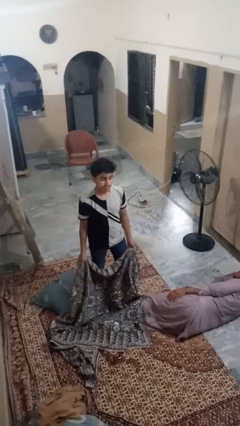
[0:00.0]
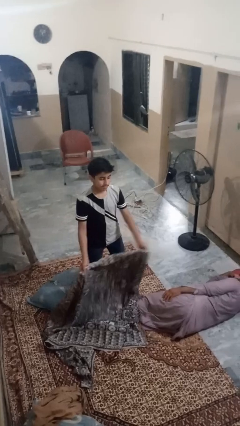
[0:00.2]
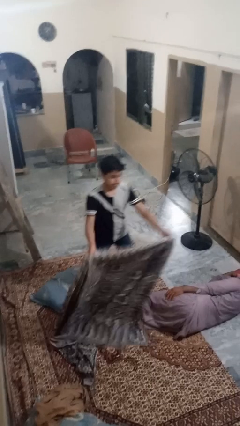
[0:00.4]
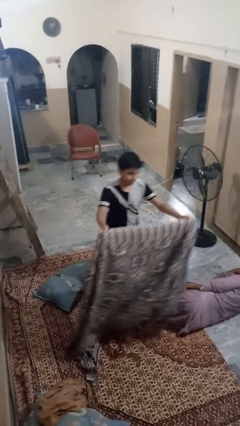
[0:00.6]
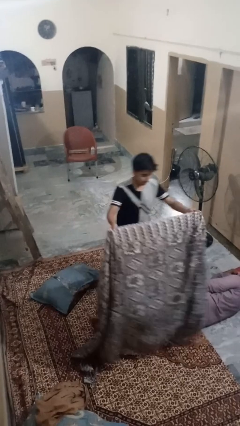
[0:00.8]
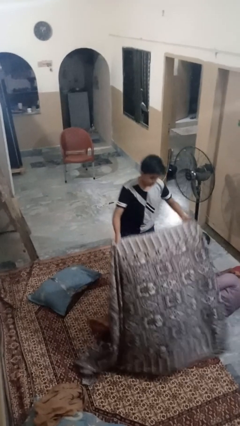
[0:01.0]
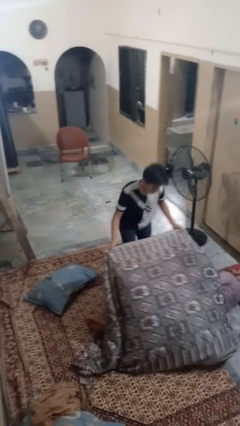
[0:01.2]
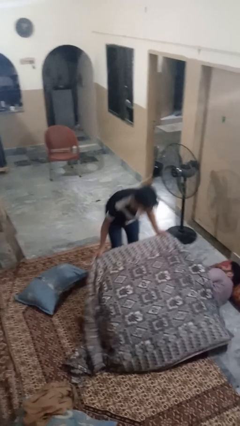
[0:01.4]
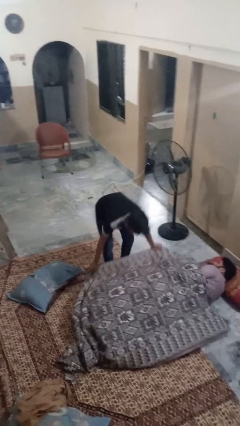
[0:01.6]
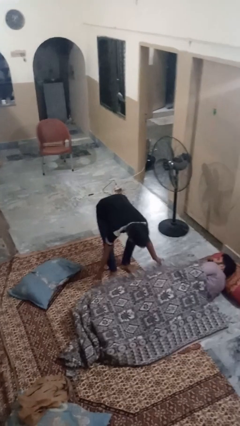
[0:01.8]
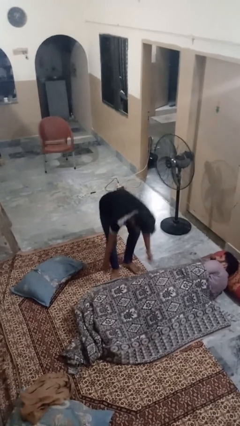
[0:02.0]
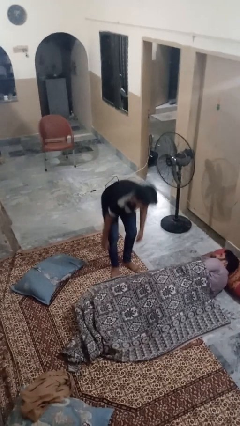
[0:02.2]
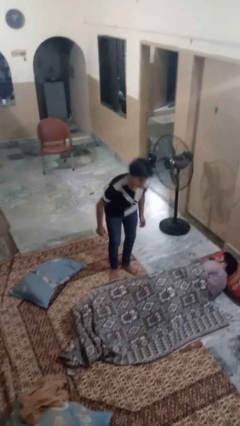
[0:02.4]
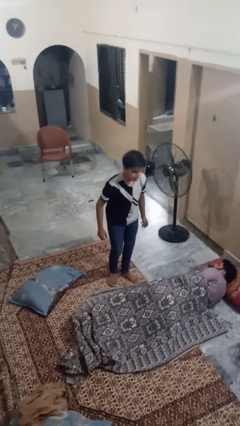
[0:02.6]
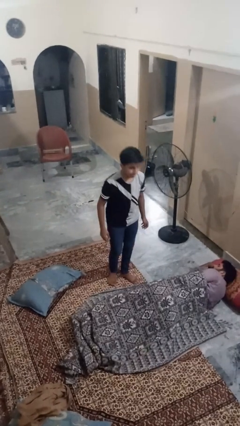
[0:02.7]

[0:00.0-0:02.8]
person covers friend with blanket

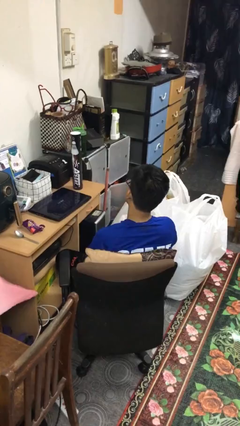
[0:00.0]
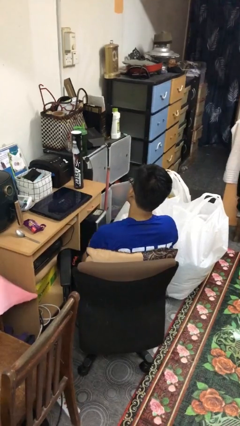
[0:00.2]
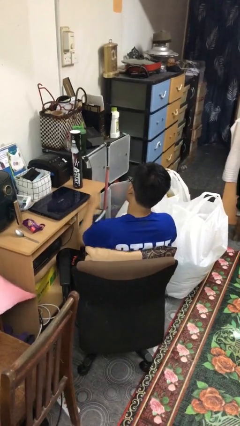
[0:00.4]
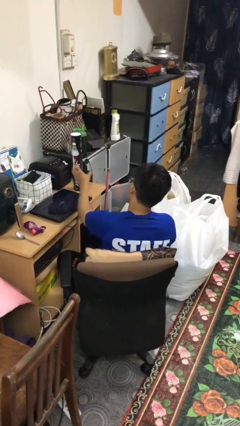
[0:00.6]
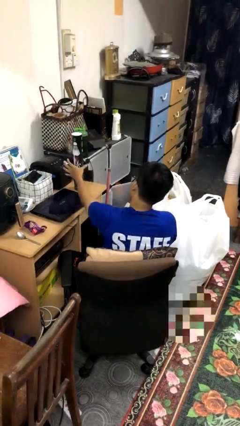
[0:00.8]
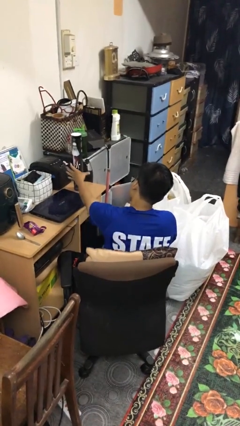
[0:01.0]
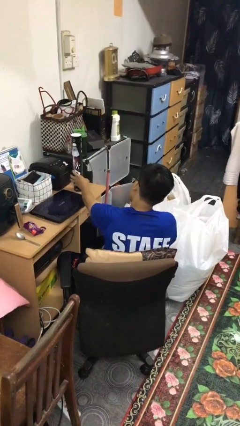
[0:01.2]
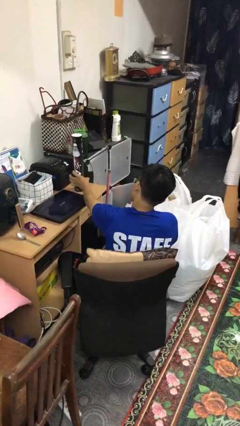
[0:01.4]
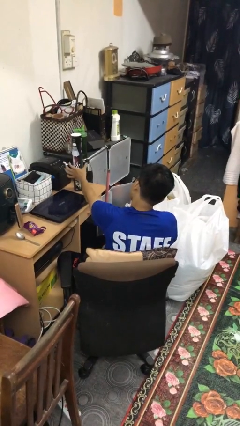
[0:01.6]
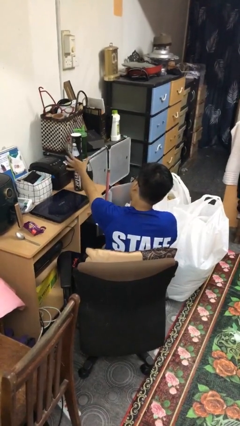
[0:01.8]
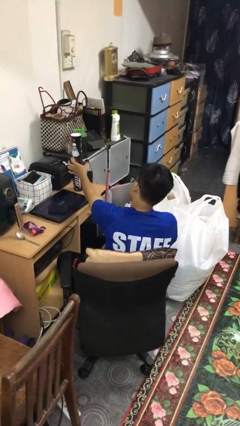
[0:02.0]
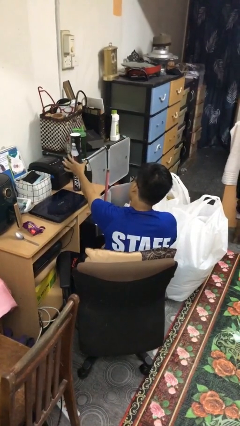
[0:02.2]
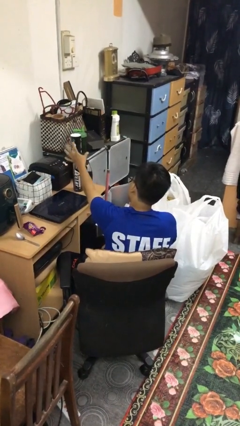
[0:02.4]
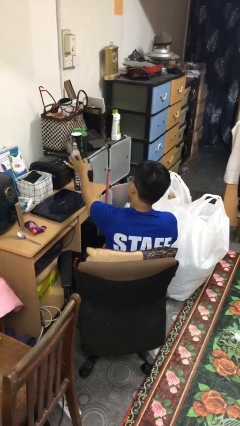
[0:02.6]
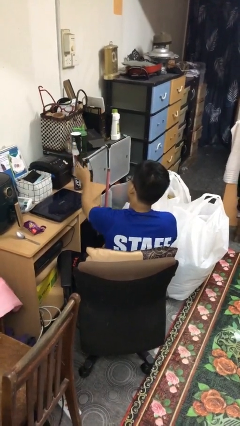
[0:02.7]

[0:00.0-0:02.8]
person waves hand over object

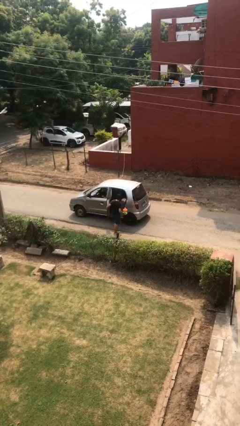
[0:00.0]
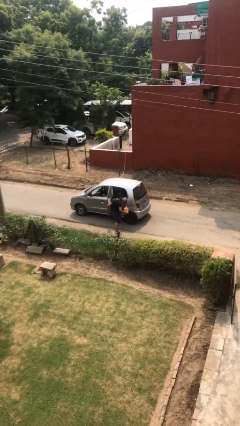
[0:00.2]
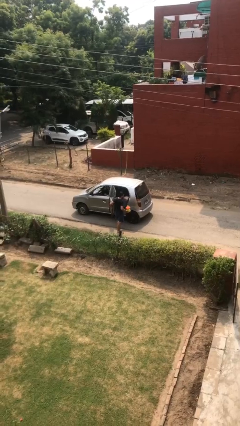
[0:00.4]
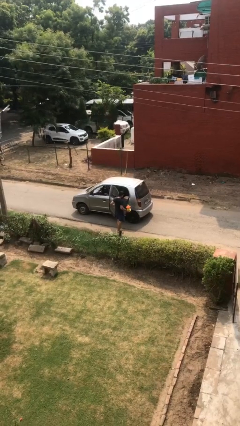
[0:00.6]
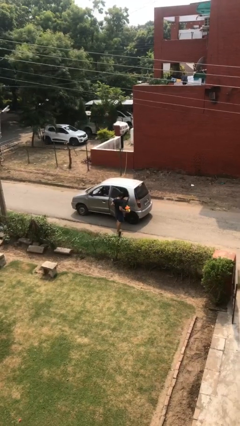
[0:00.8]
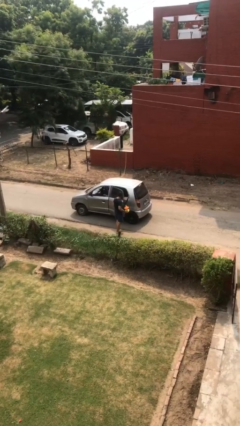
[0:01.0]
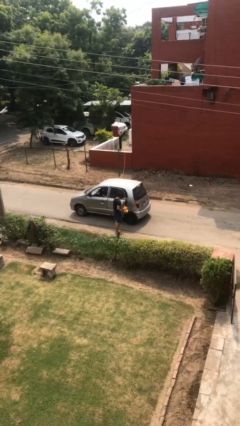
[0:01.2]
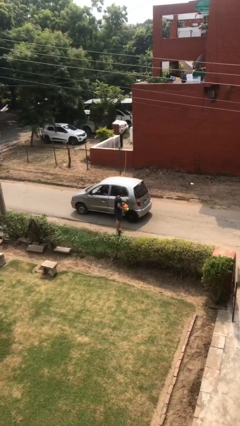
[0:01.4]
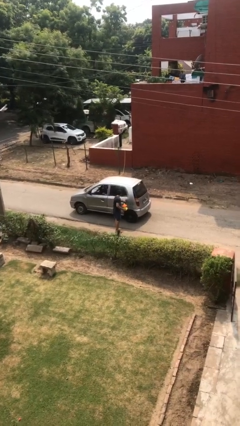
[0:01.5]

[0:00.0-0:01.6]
person closes car door

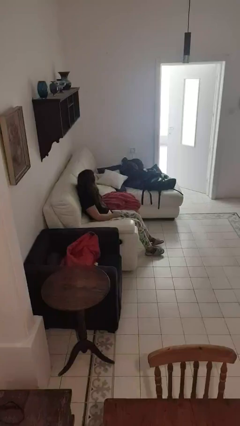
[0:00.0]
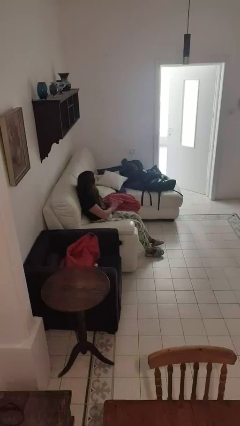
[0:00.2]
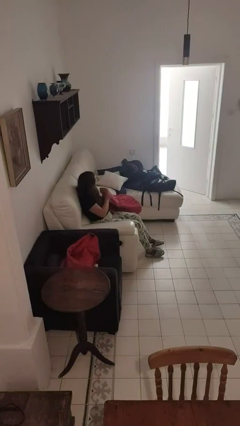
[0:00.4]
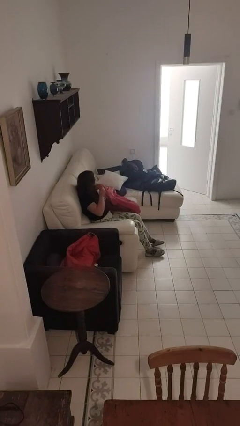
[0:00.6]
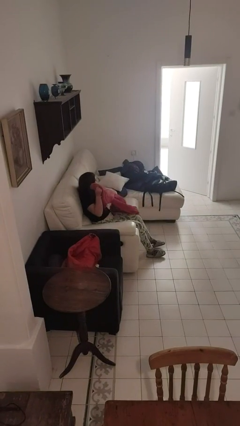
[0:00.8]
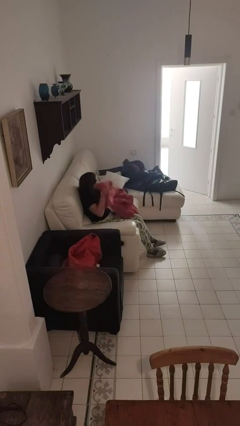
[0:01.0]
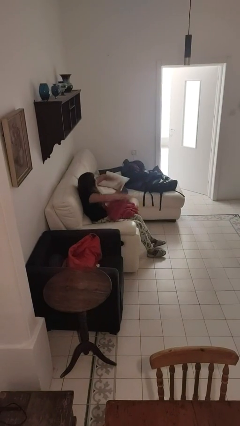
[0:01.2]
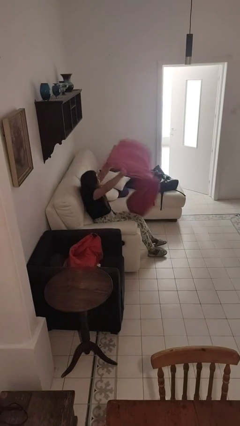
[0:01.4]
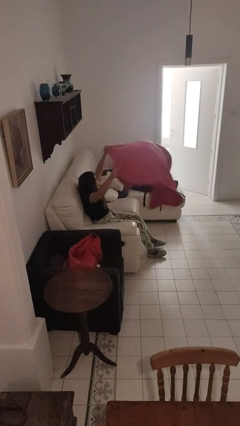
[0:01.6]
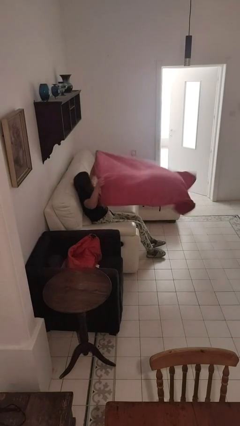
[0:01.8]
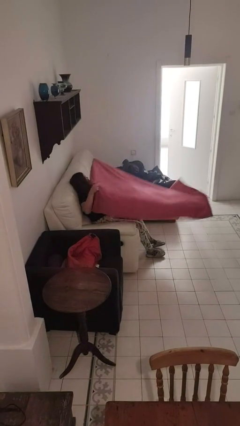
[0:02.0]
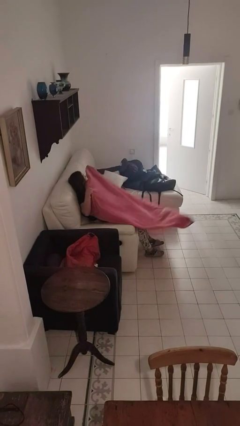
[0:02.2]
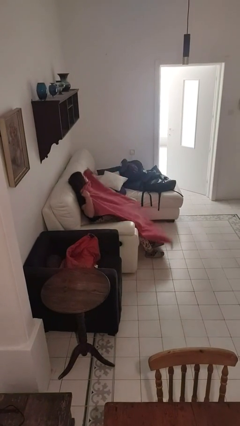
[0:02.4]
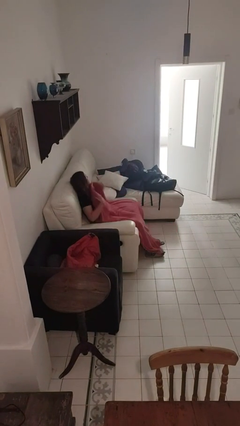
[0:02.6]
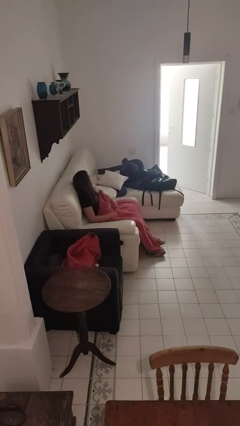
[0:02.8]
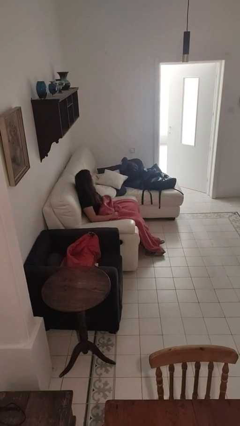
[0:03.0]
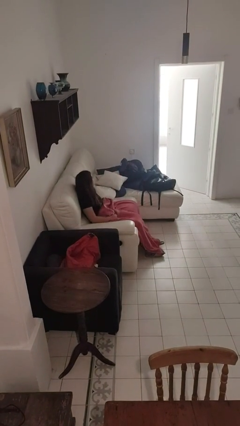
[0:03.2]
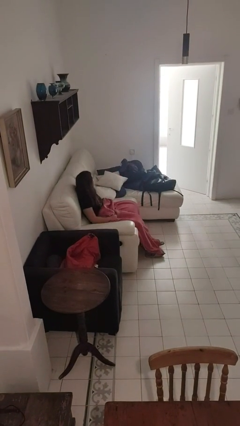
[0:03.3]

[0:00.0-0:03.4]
person covers with blanket

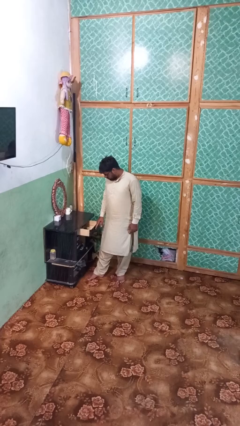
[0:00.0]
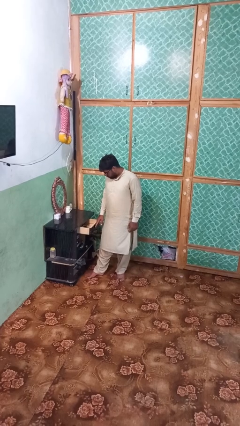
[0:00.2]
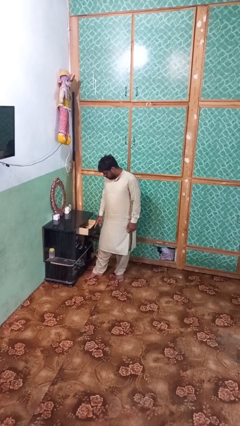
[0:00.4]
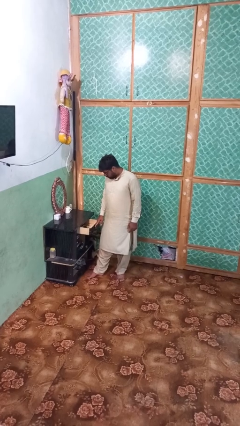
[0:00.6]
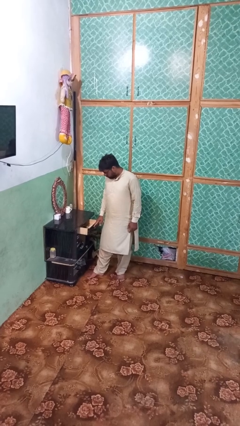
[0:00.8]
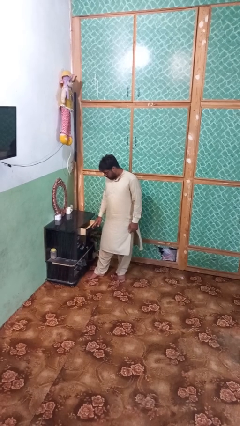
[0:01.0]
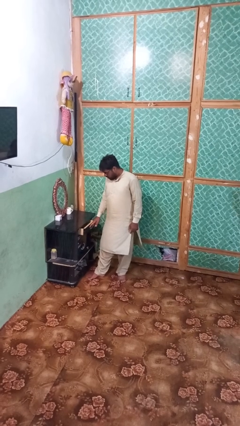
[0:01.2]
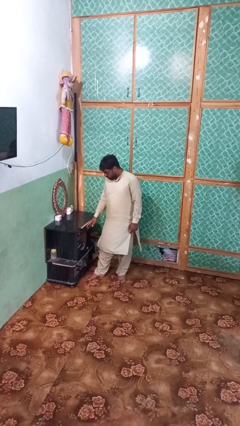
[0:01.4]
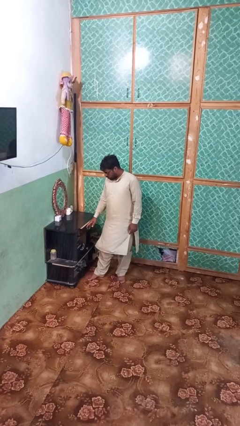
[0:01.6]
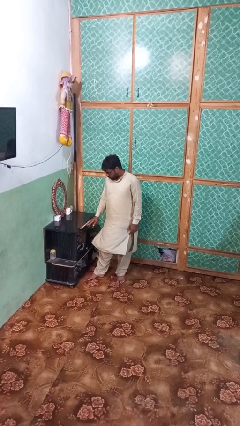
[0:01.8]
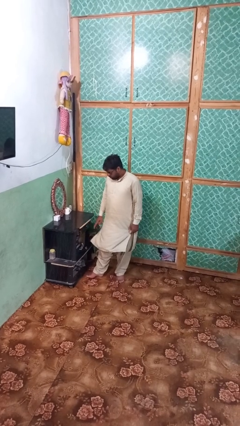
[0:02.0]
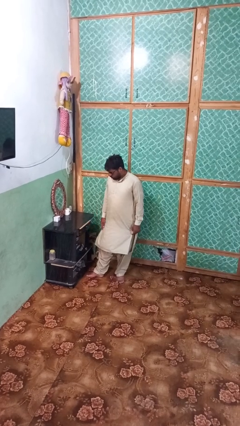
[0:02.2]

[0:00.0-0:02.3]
person closes dresser drawer

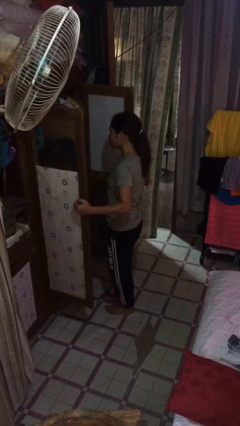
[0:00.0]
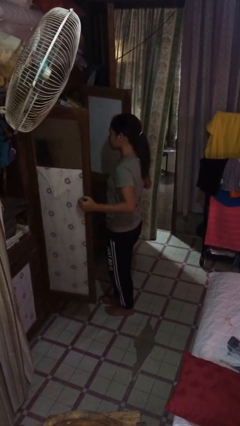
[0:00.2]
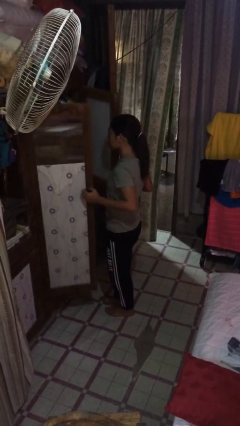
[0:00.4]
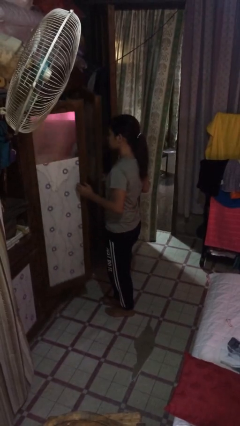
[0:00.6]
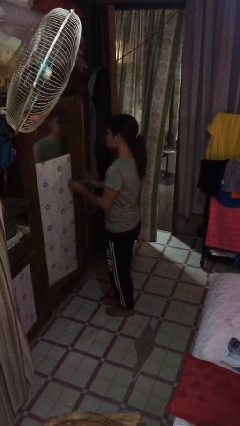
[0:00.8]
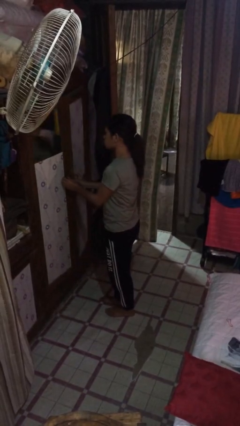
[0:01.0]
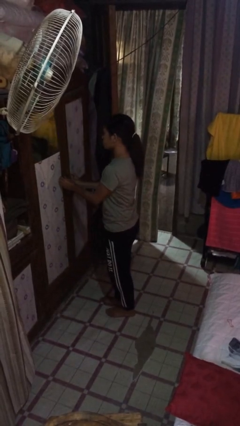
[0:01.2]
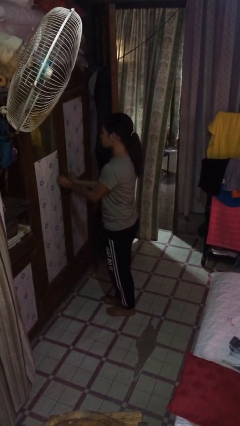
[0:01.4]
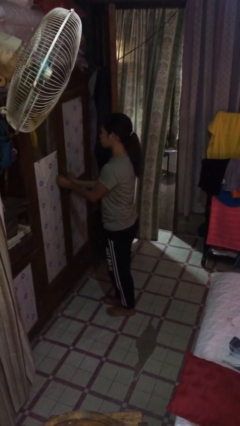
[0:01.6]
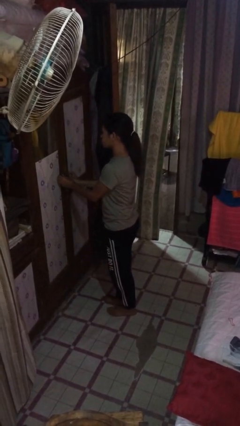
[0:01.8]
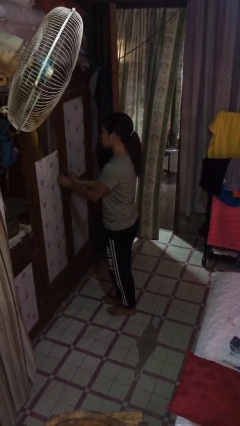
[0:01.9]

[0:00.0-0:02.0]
person closes closet door

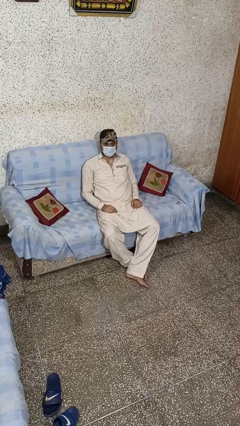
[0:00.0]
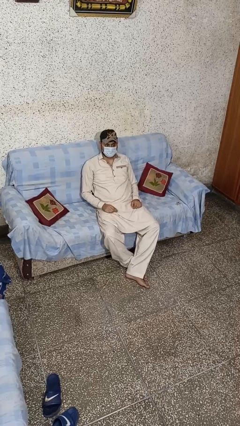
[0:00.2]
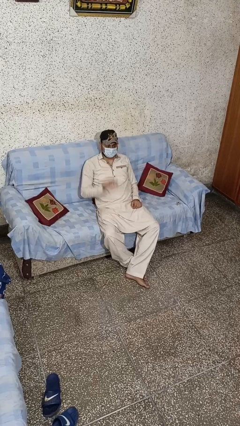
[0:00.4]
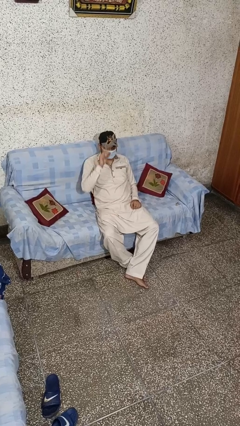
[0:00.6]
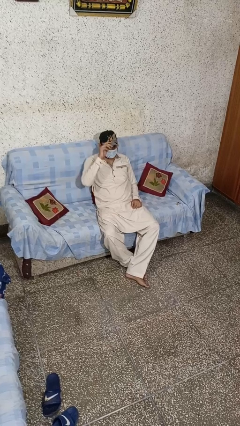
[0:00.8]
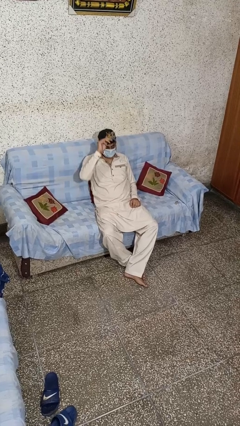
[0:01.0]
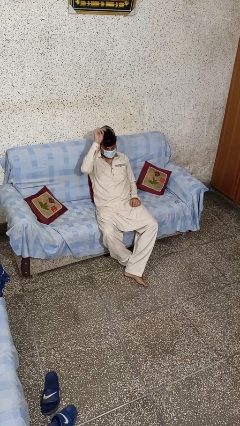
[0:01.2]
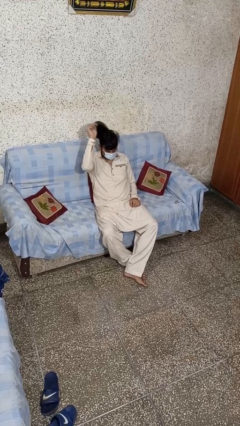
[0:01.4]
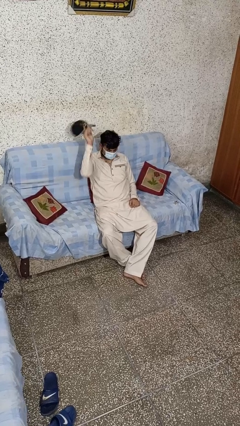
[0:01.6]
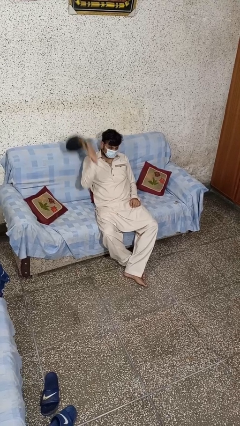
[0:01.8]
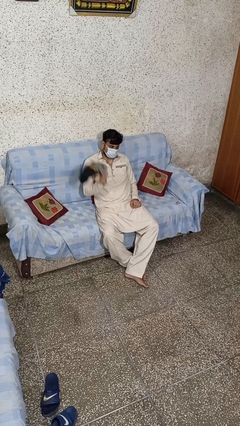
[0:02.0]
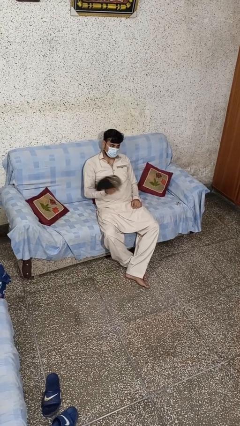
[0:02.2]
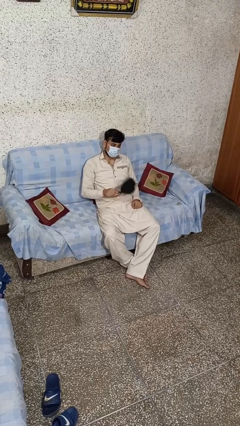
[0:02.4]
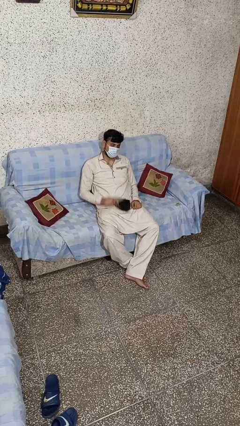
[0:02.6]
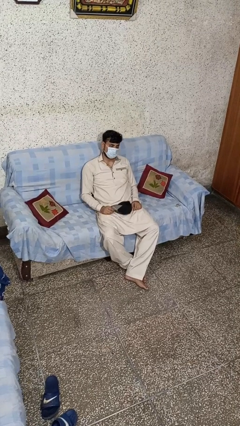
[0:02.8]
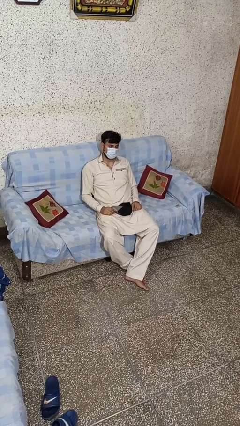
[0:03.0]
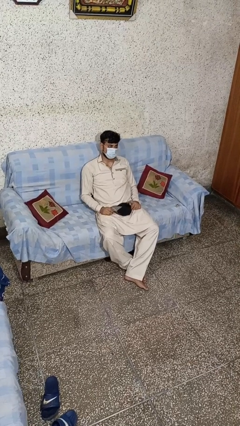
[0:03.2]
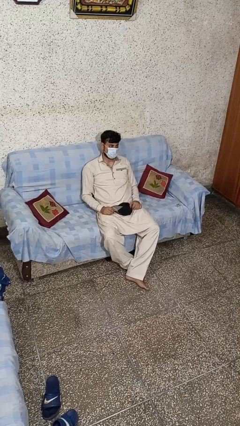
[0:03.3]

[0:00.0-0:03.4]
person takes off hat
